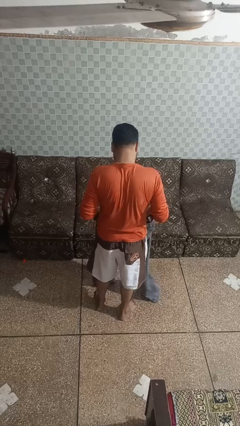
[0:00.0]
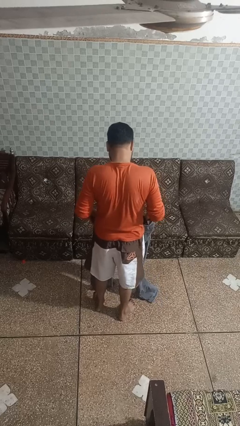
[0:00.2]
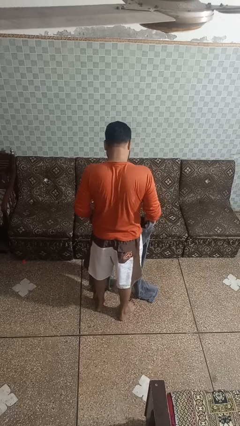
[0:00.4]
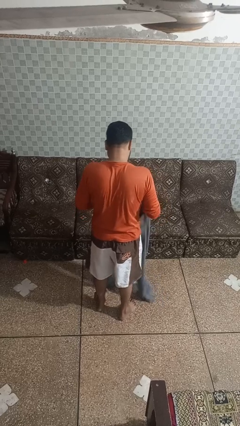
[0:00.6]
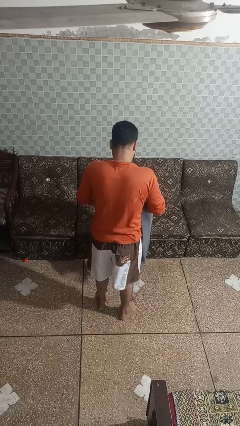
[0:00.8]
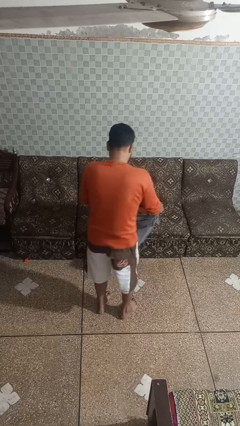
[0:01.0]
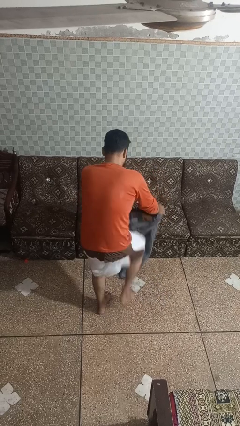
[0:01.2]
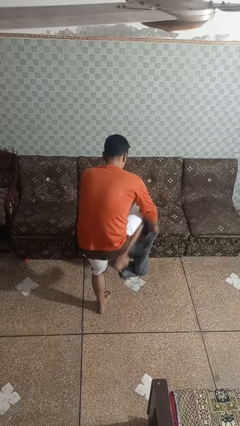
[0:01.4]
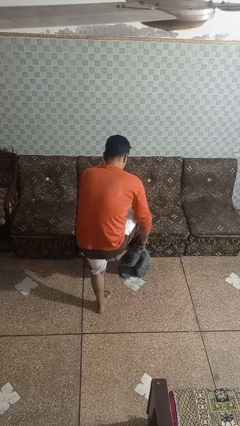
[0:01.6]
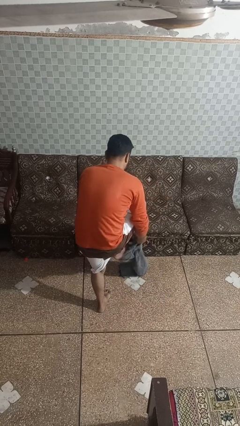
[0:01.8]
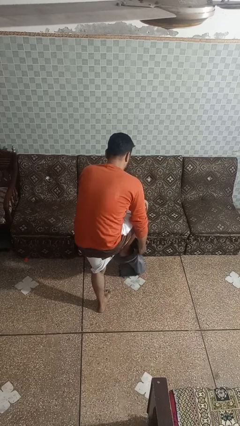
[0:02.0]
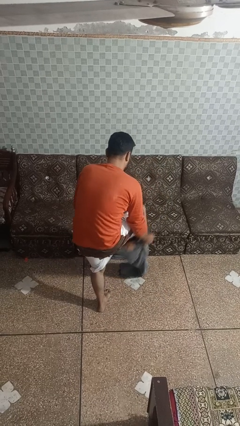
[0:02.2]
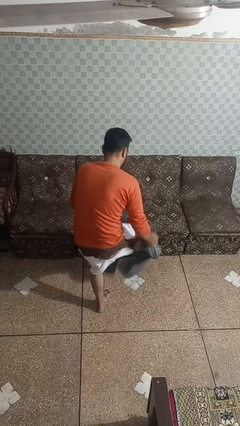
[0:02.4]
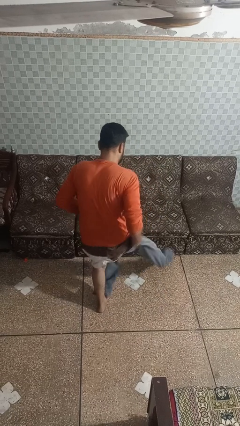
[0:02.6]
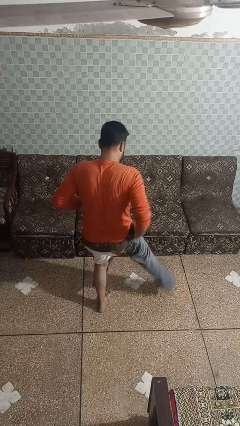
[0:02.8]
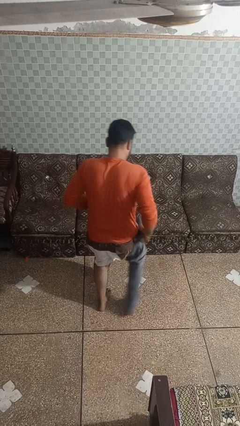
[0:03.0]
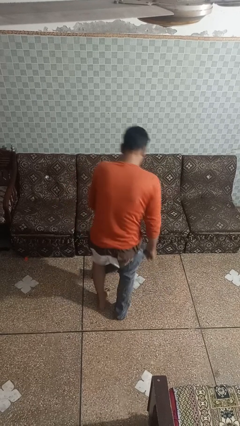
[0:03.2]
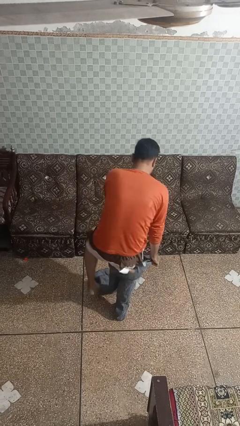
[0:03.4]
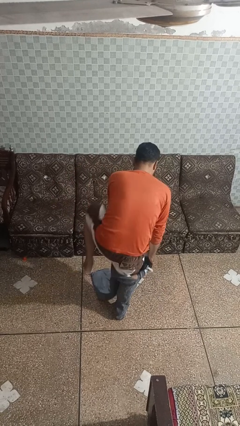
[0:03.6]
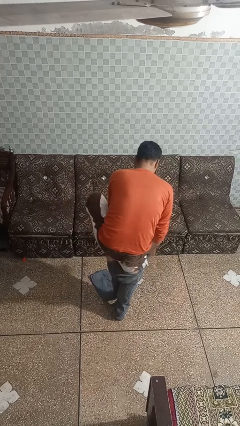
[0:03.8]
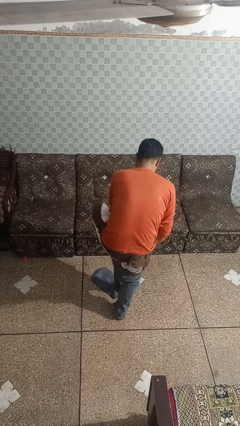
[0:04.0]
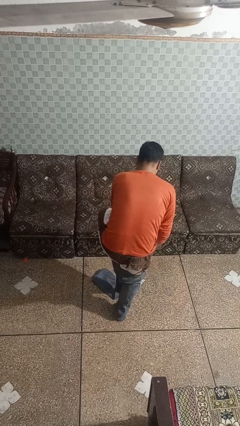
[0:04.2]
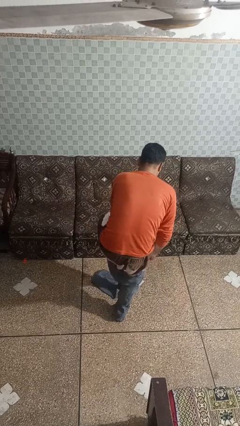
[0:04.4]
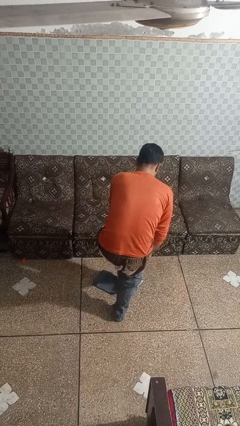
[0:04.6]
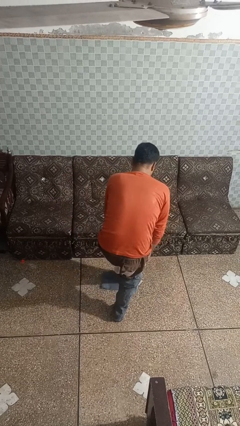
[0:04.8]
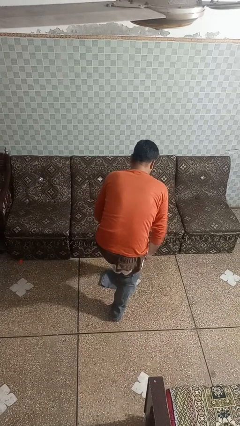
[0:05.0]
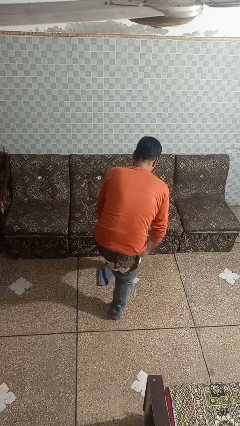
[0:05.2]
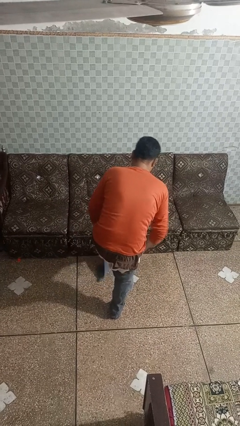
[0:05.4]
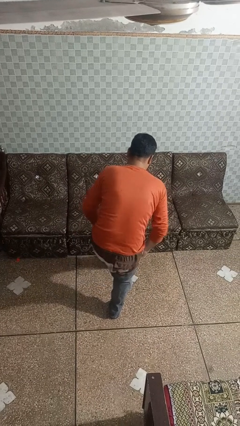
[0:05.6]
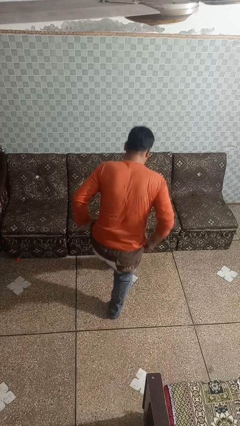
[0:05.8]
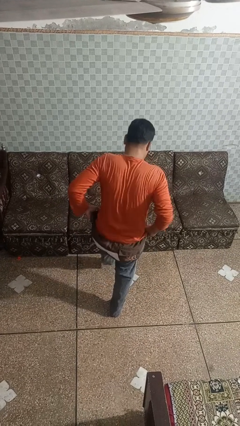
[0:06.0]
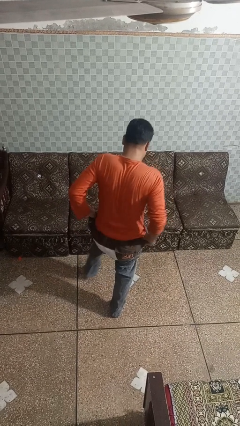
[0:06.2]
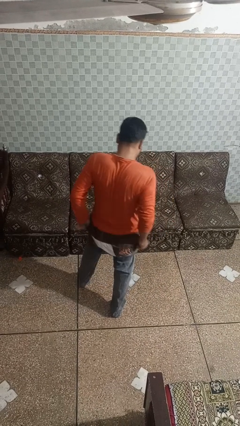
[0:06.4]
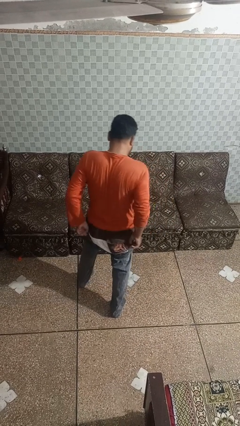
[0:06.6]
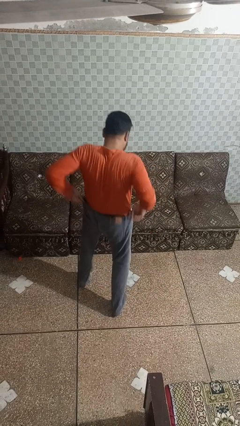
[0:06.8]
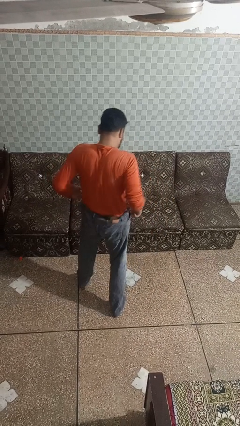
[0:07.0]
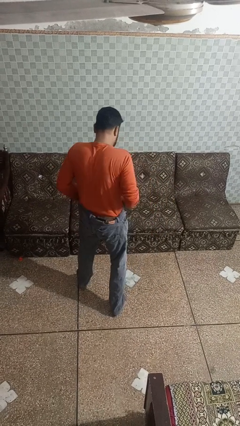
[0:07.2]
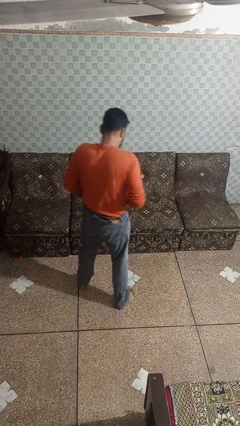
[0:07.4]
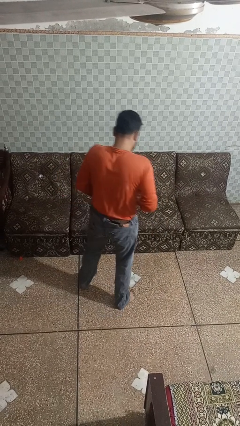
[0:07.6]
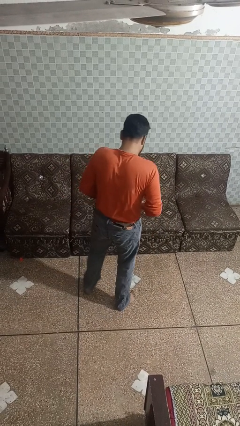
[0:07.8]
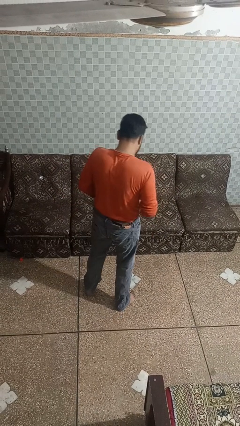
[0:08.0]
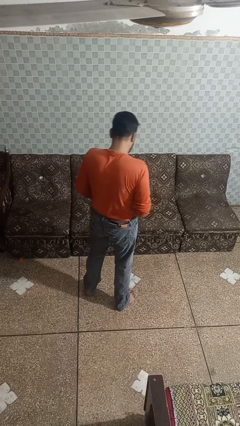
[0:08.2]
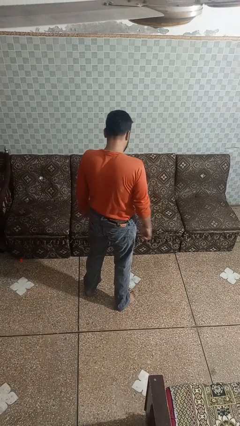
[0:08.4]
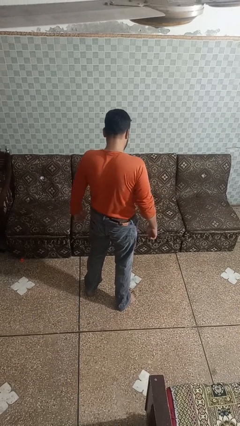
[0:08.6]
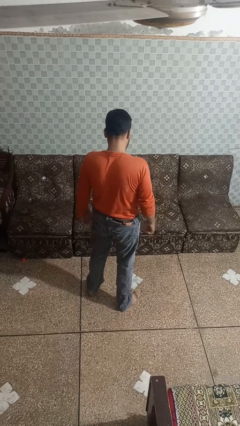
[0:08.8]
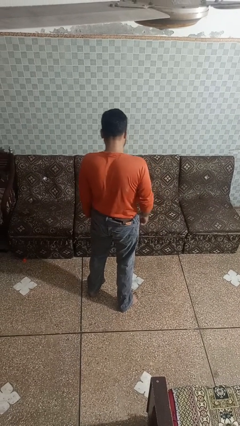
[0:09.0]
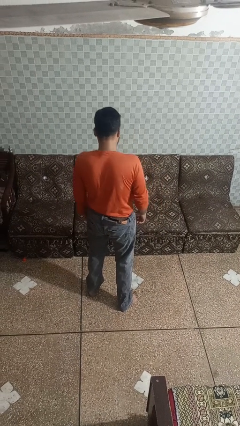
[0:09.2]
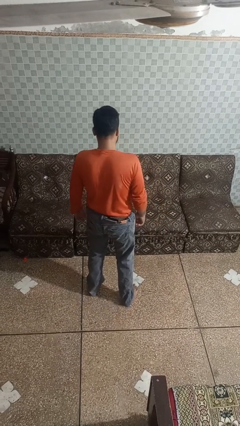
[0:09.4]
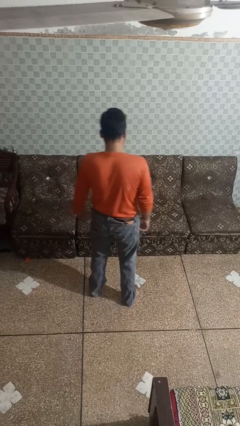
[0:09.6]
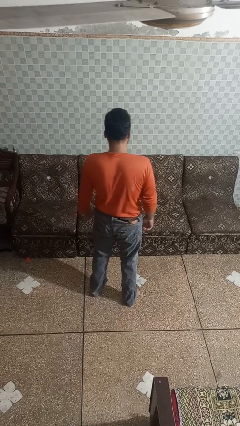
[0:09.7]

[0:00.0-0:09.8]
person puts on pants

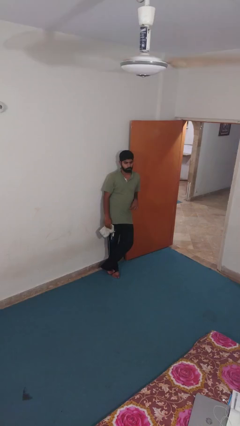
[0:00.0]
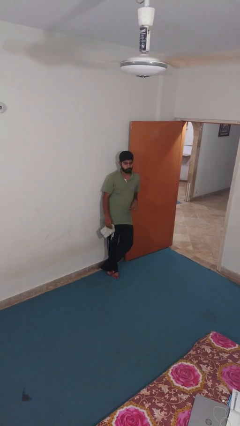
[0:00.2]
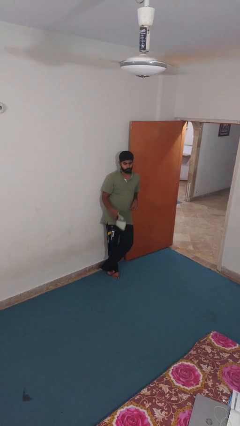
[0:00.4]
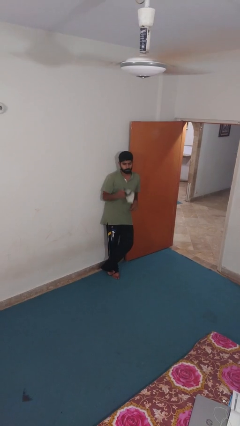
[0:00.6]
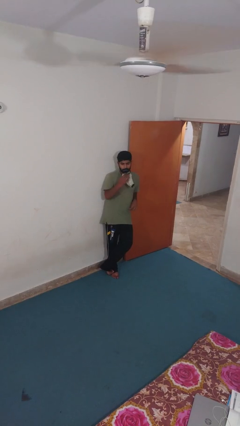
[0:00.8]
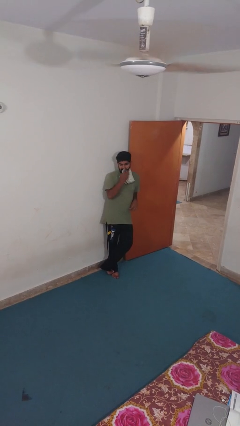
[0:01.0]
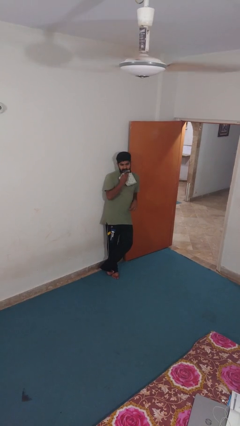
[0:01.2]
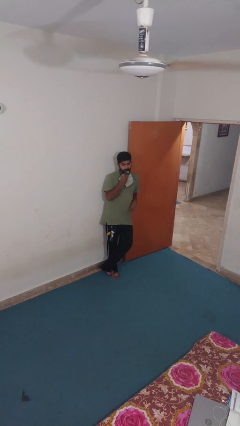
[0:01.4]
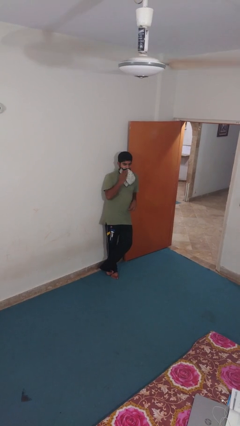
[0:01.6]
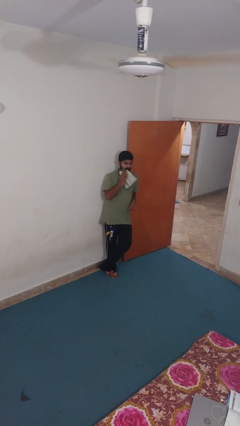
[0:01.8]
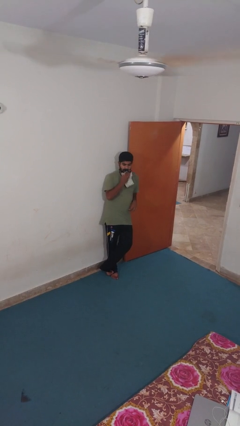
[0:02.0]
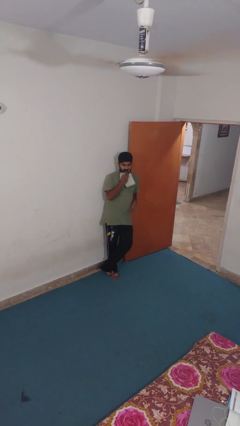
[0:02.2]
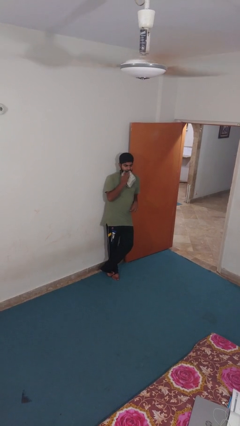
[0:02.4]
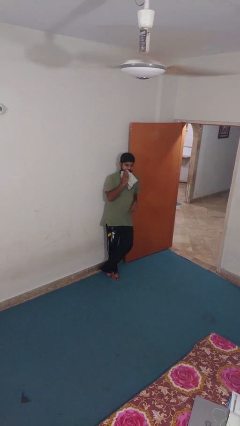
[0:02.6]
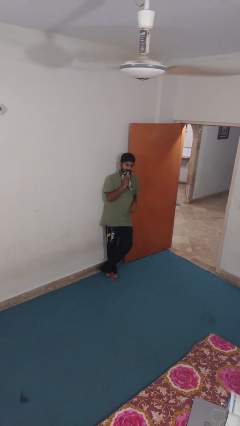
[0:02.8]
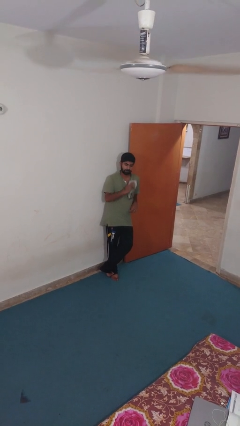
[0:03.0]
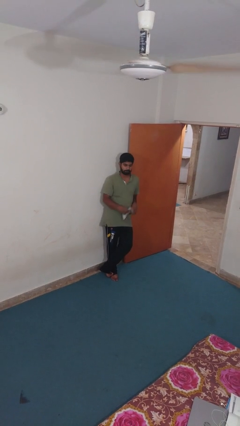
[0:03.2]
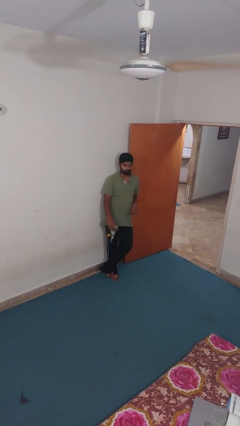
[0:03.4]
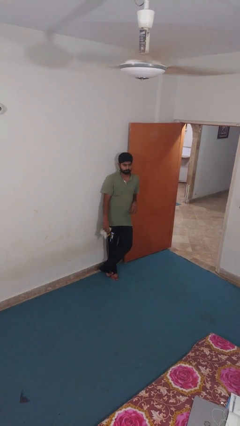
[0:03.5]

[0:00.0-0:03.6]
person wipes mouth with napkin

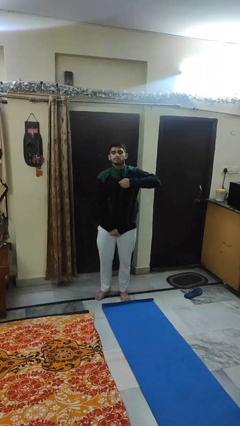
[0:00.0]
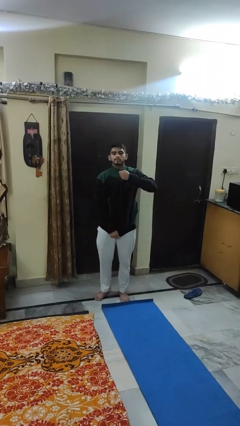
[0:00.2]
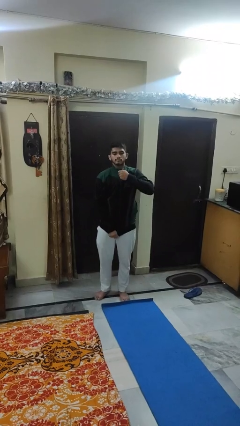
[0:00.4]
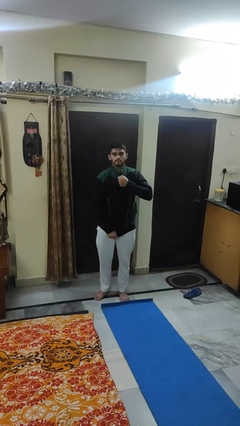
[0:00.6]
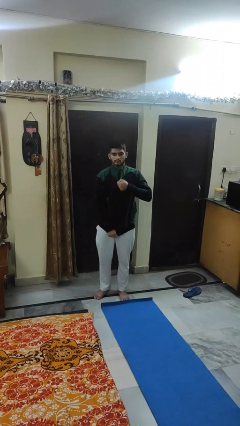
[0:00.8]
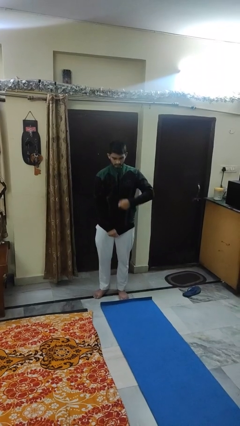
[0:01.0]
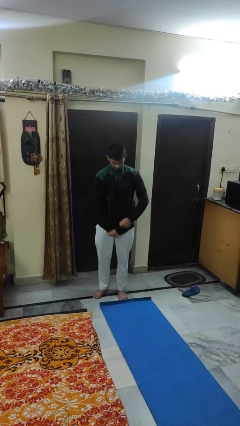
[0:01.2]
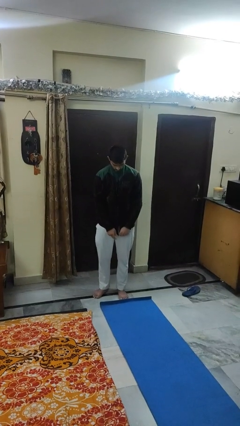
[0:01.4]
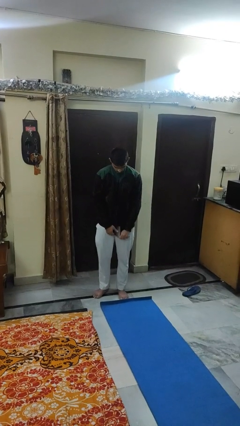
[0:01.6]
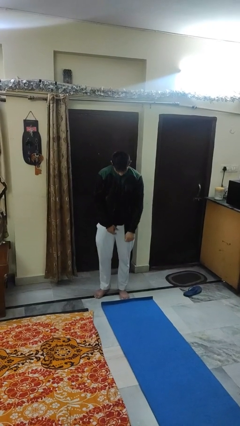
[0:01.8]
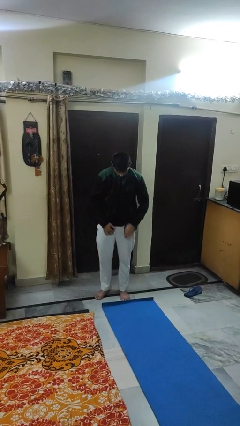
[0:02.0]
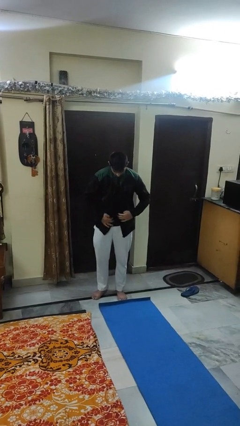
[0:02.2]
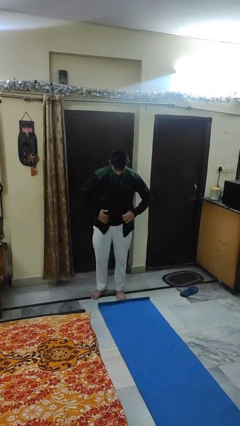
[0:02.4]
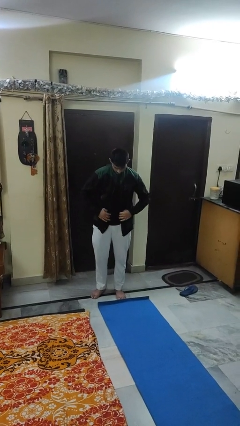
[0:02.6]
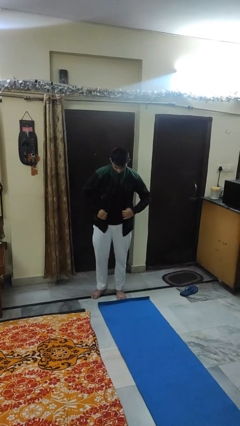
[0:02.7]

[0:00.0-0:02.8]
person unzips jacket

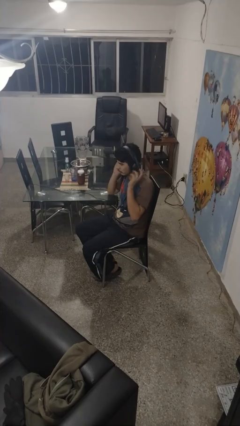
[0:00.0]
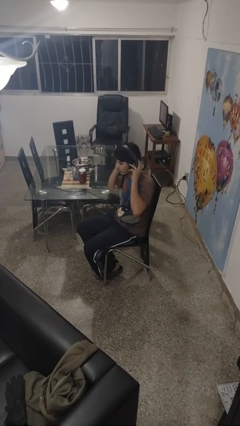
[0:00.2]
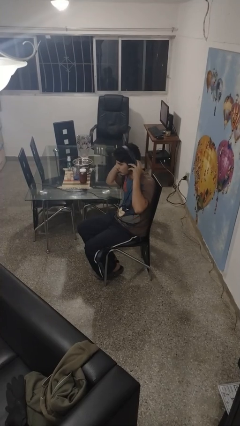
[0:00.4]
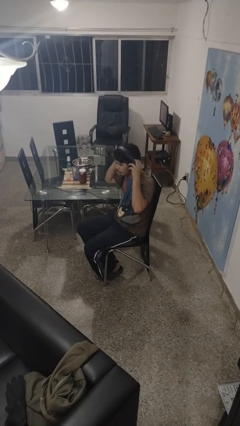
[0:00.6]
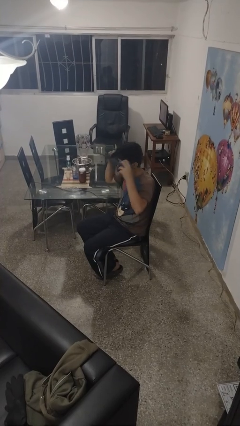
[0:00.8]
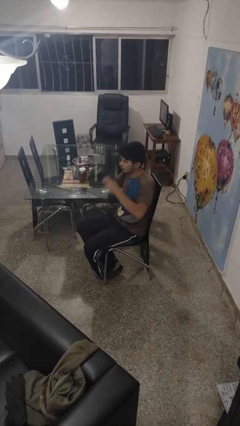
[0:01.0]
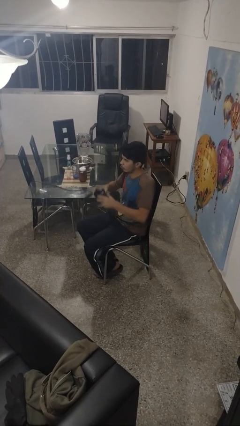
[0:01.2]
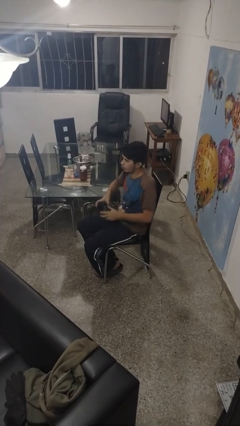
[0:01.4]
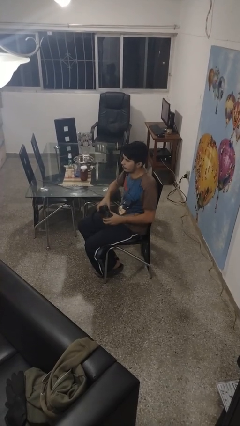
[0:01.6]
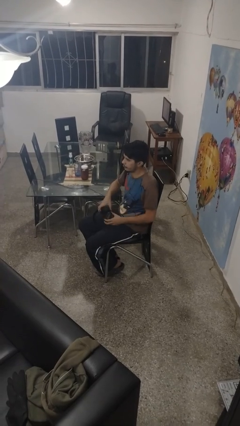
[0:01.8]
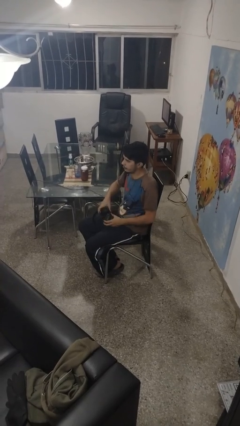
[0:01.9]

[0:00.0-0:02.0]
person takes off headphones
